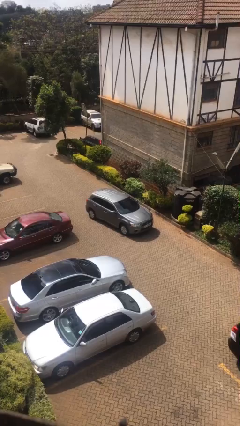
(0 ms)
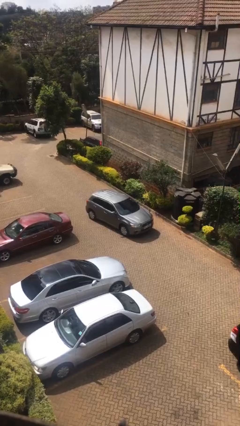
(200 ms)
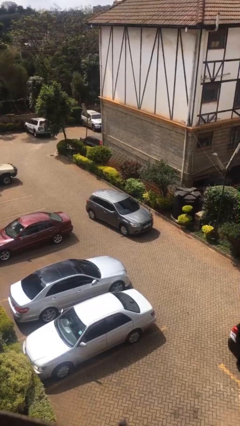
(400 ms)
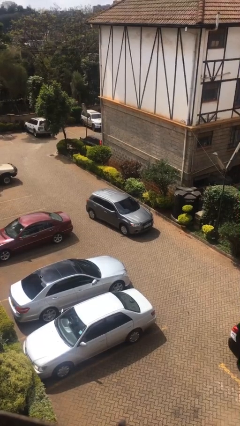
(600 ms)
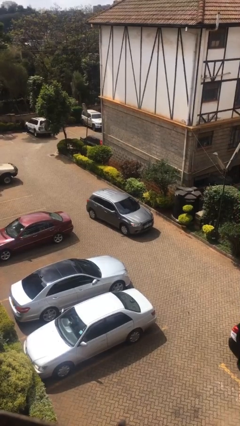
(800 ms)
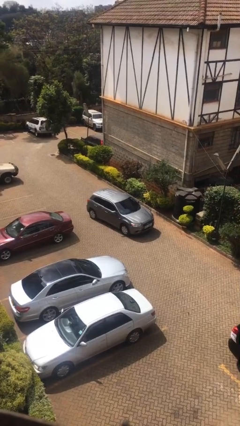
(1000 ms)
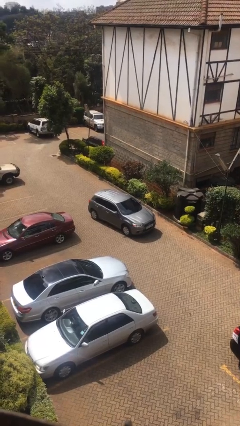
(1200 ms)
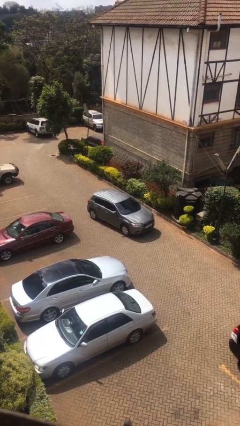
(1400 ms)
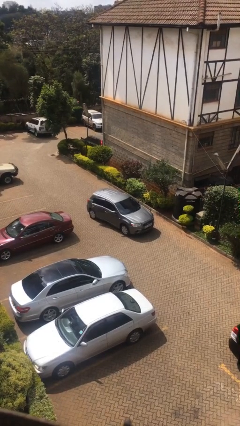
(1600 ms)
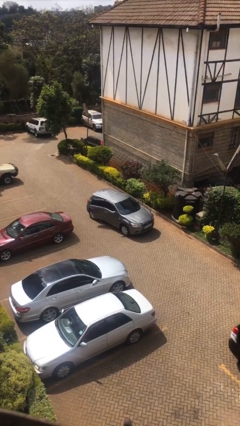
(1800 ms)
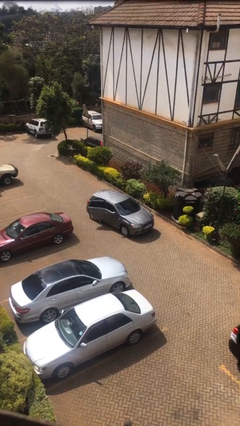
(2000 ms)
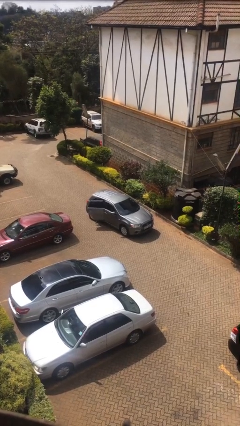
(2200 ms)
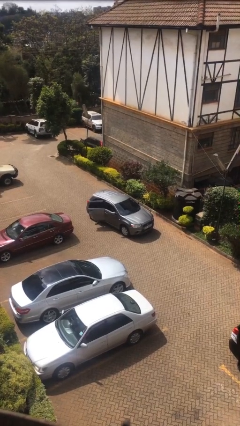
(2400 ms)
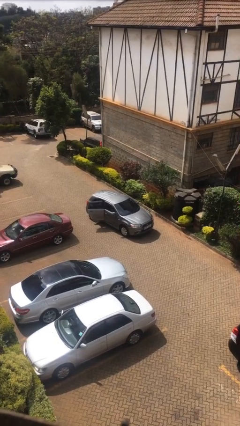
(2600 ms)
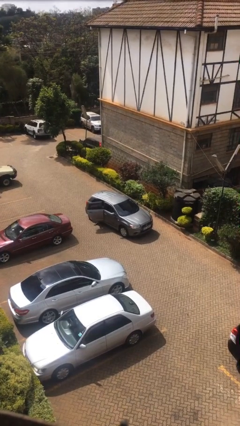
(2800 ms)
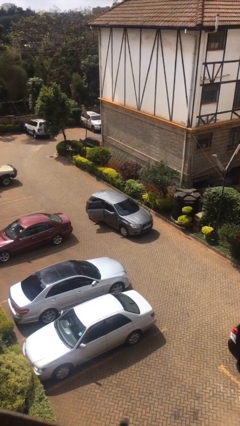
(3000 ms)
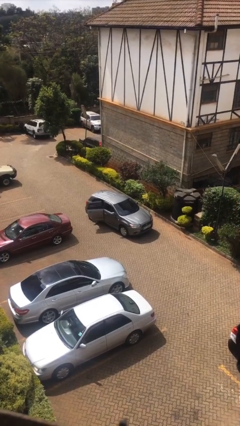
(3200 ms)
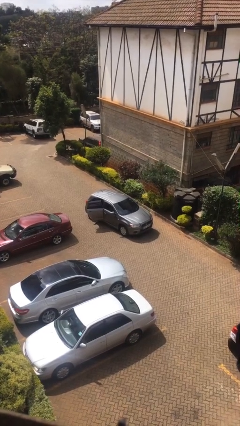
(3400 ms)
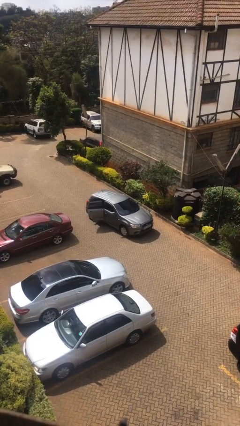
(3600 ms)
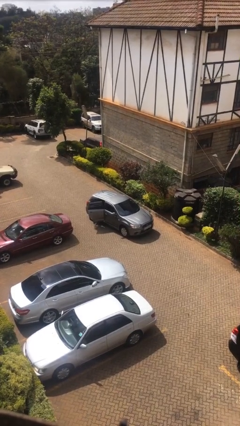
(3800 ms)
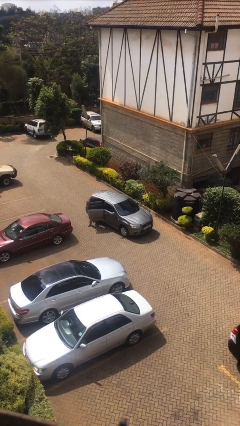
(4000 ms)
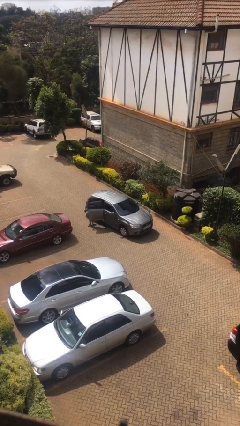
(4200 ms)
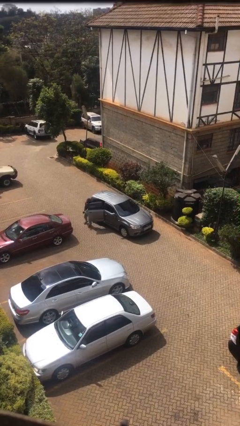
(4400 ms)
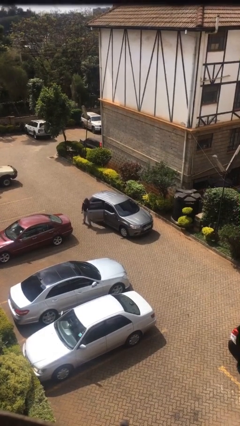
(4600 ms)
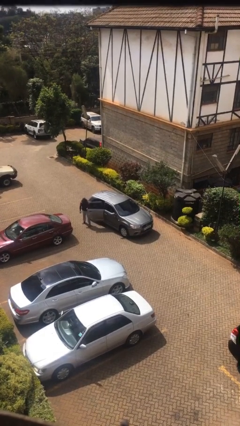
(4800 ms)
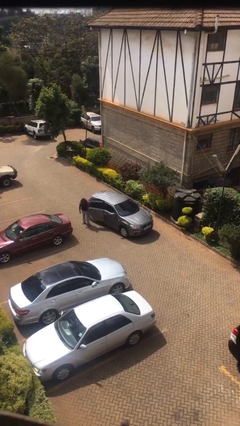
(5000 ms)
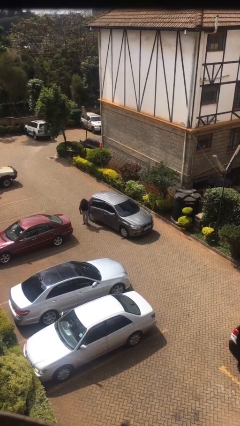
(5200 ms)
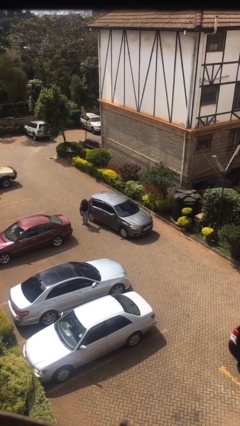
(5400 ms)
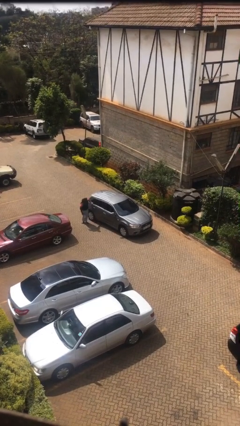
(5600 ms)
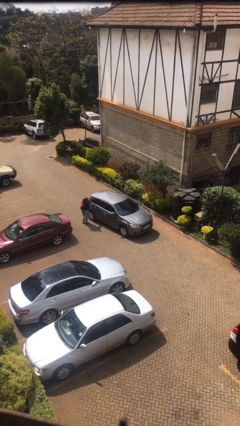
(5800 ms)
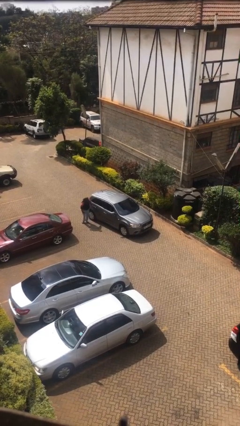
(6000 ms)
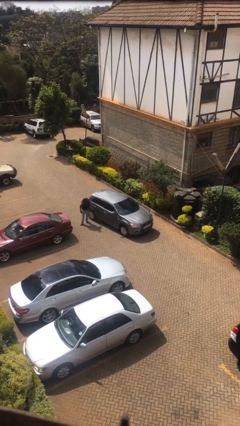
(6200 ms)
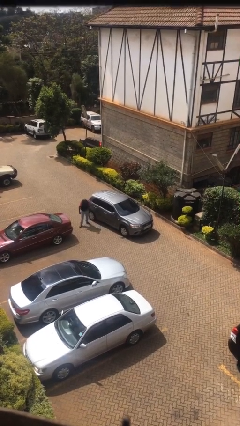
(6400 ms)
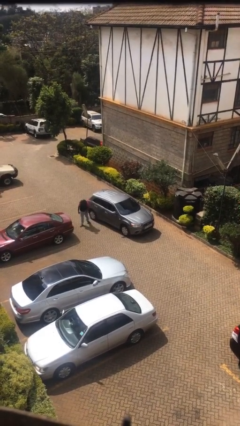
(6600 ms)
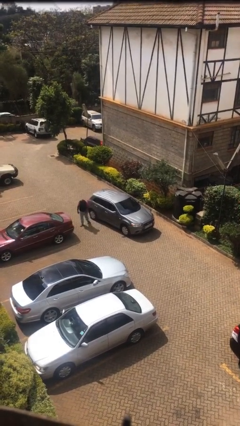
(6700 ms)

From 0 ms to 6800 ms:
car drops off person

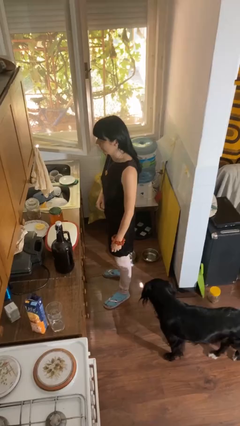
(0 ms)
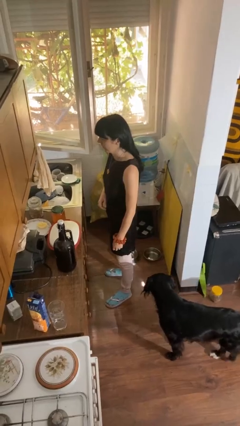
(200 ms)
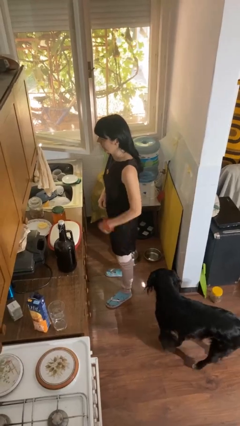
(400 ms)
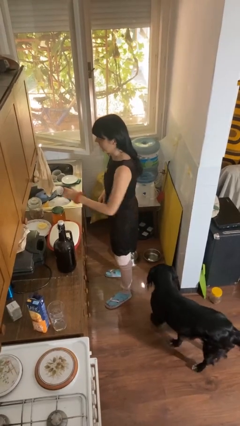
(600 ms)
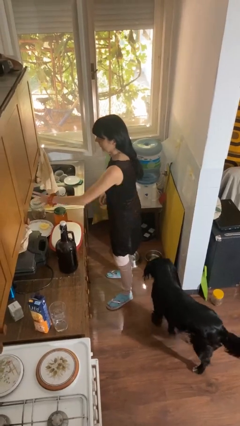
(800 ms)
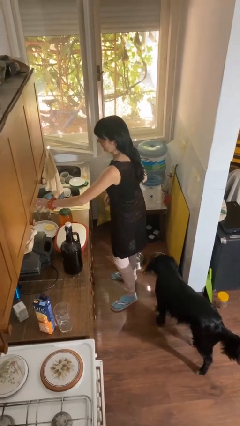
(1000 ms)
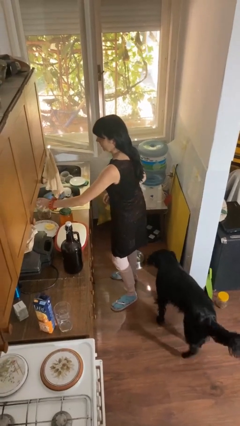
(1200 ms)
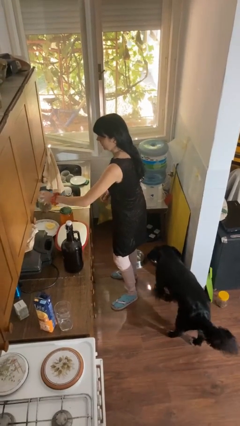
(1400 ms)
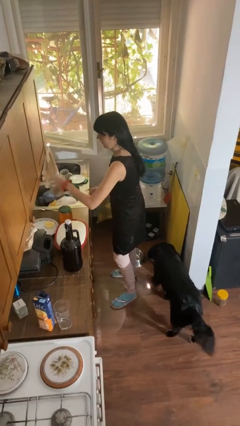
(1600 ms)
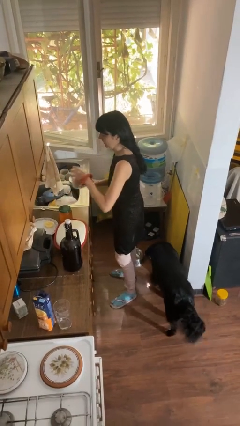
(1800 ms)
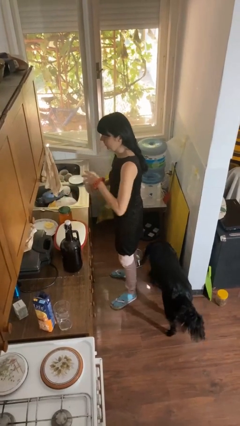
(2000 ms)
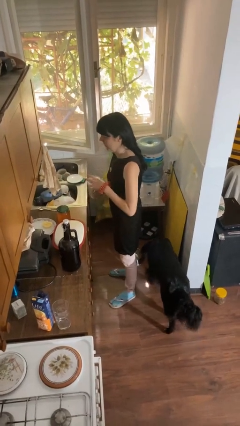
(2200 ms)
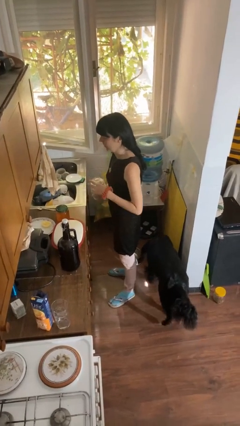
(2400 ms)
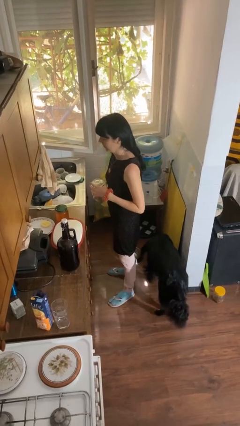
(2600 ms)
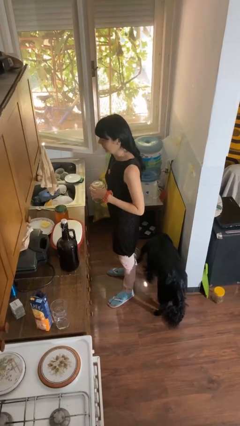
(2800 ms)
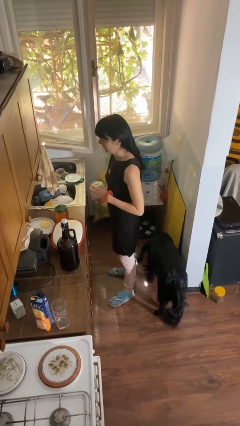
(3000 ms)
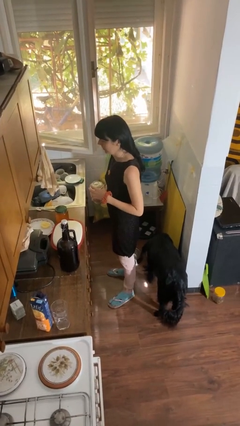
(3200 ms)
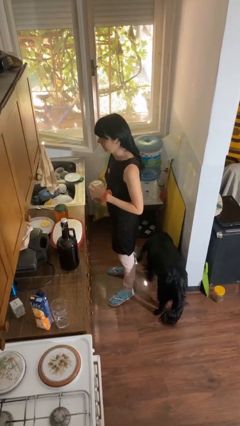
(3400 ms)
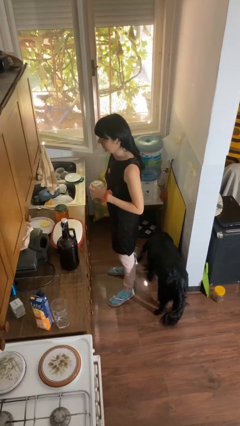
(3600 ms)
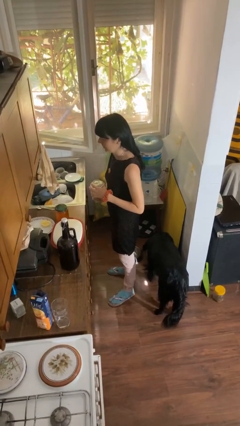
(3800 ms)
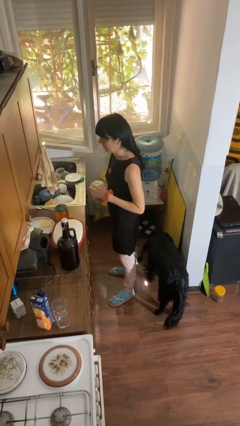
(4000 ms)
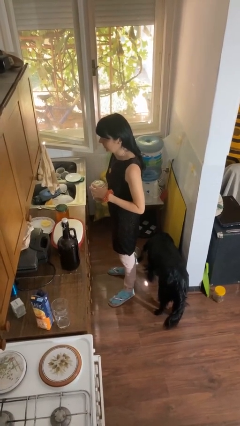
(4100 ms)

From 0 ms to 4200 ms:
person picks up object from countertop

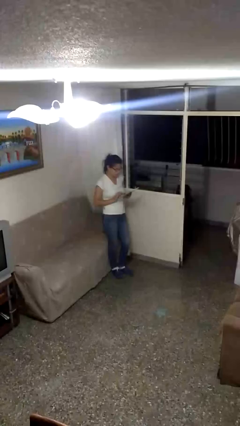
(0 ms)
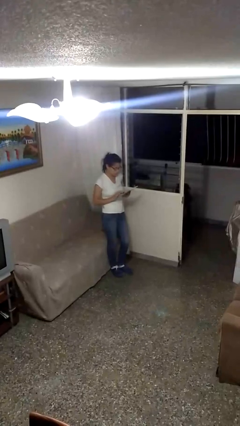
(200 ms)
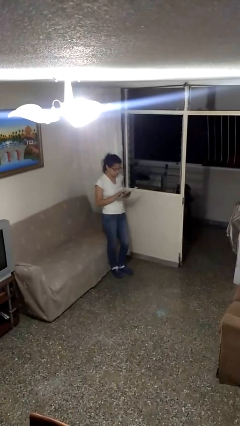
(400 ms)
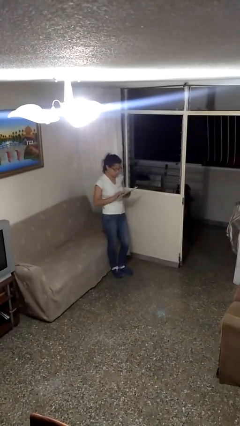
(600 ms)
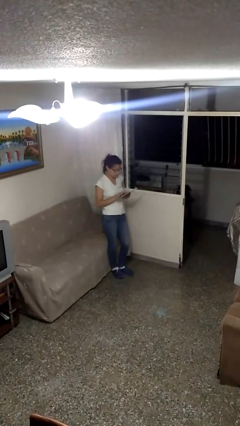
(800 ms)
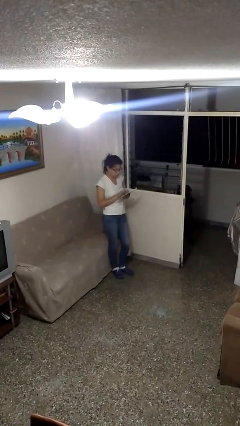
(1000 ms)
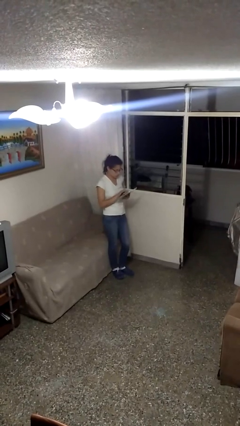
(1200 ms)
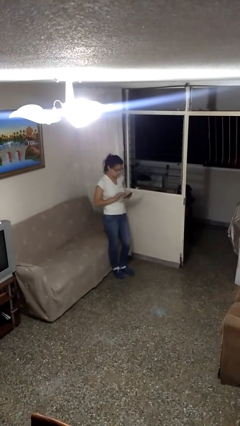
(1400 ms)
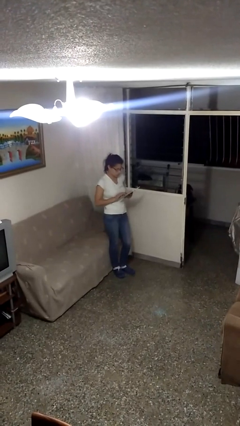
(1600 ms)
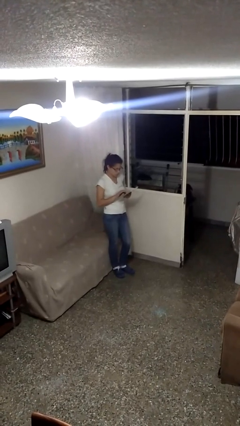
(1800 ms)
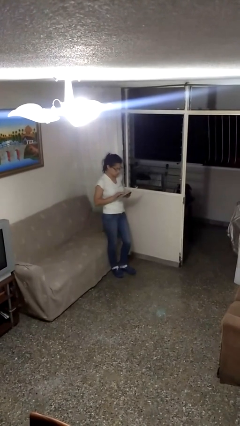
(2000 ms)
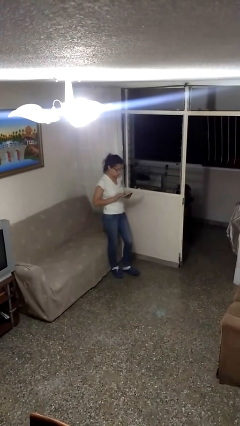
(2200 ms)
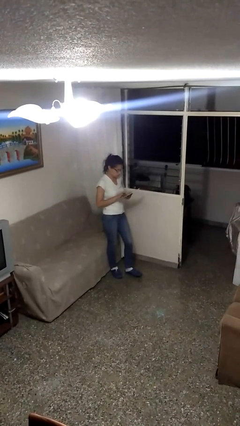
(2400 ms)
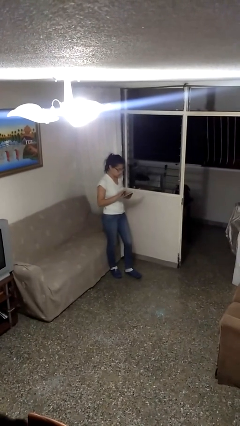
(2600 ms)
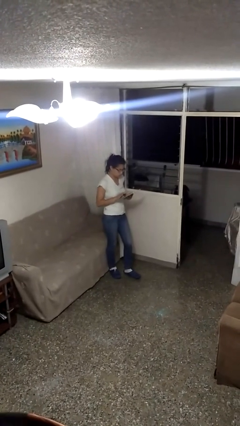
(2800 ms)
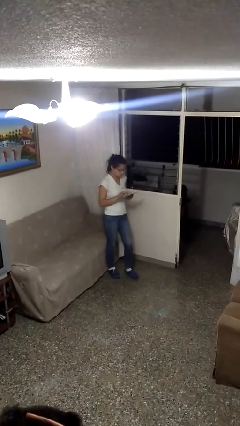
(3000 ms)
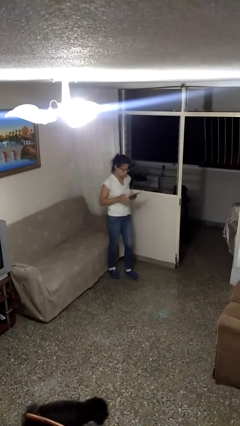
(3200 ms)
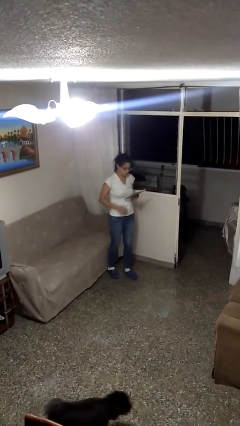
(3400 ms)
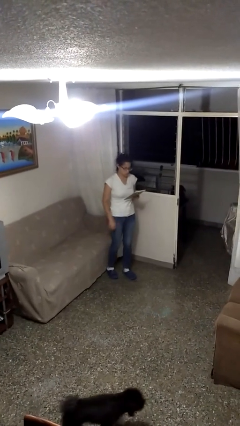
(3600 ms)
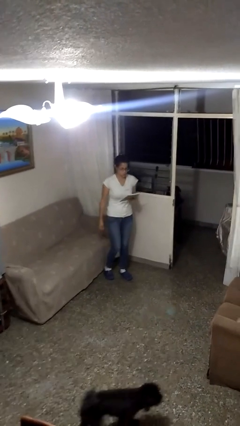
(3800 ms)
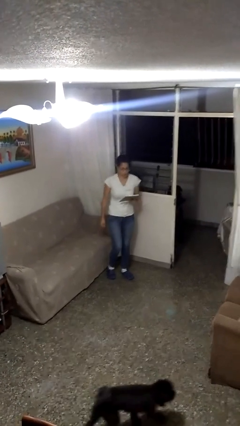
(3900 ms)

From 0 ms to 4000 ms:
person interacts with tablet

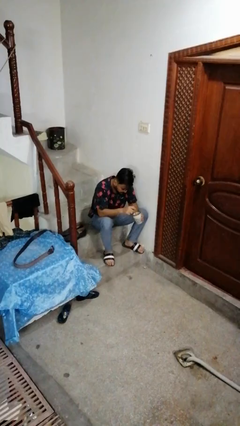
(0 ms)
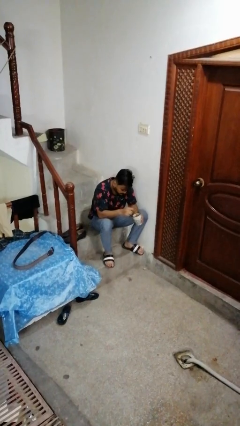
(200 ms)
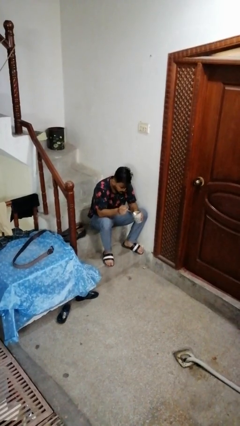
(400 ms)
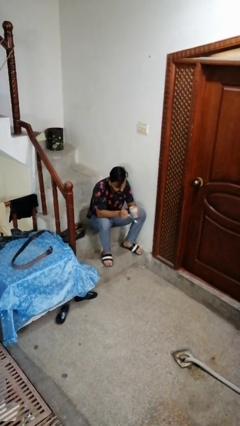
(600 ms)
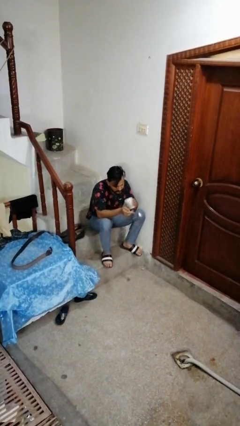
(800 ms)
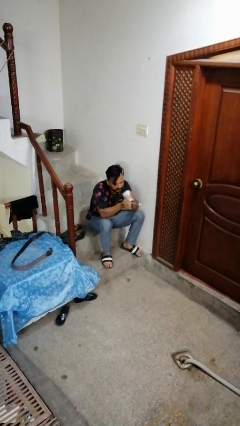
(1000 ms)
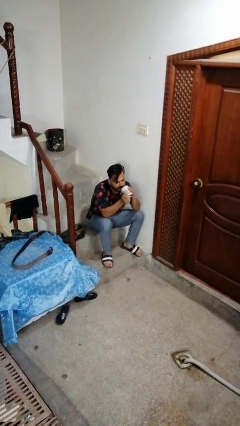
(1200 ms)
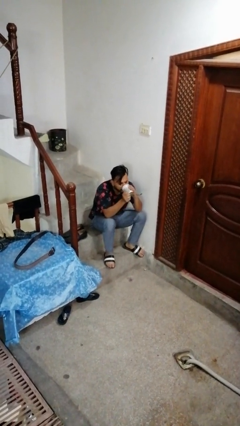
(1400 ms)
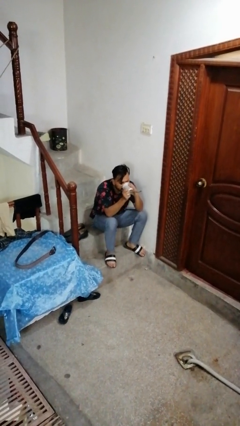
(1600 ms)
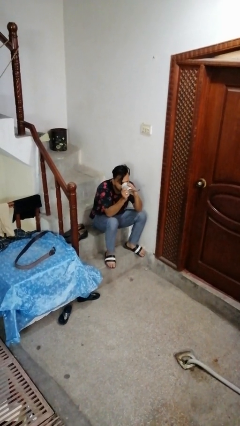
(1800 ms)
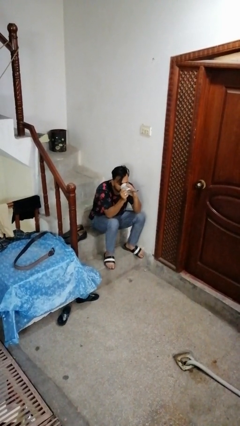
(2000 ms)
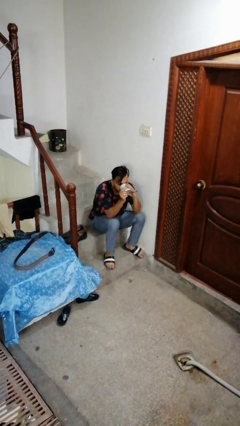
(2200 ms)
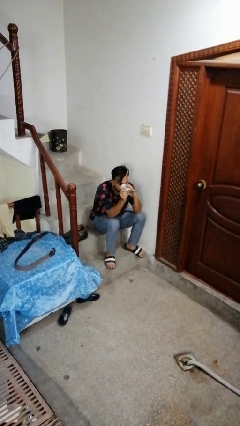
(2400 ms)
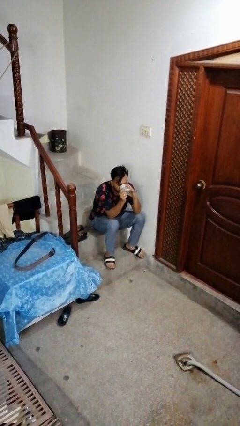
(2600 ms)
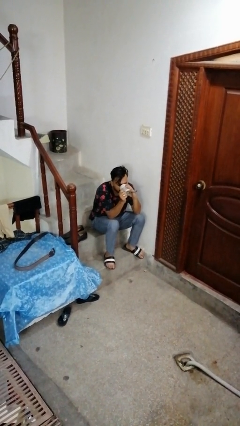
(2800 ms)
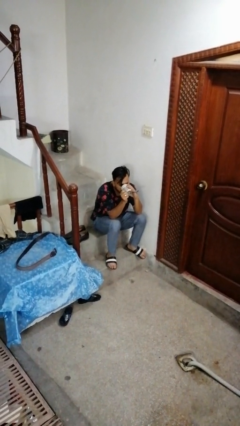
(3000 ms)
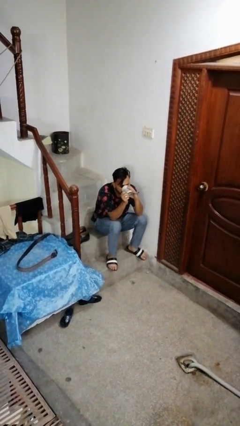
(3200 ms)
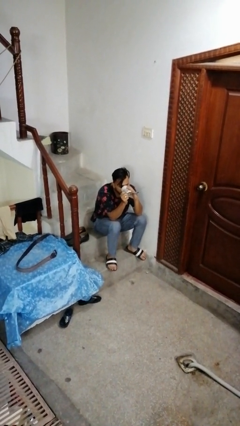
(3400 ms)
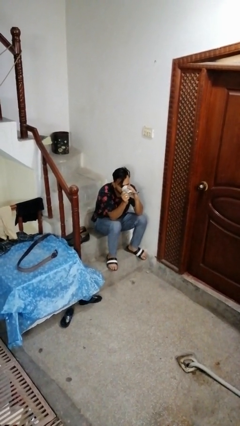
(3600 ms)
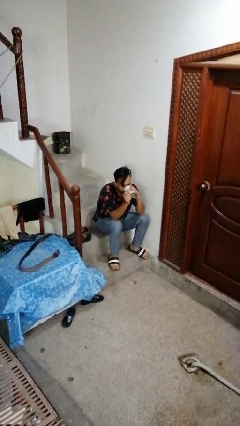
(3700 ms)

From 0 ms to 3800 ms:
person drinks from mug
